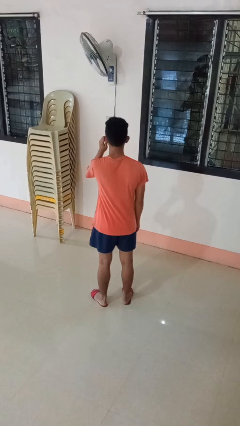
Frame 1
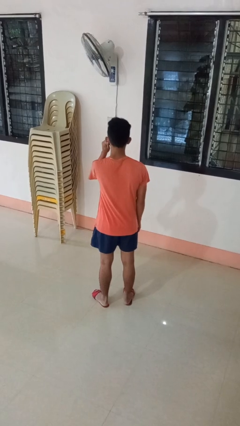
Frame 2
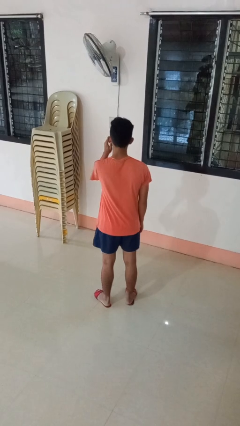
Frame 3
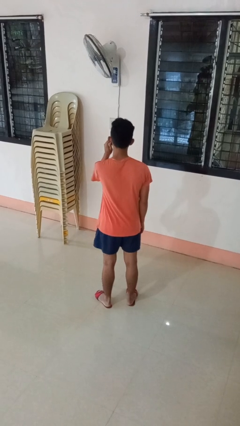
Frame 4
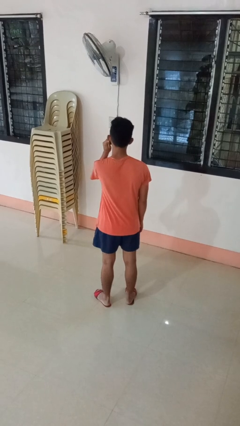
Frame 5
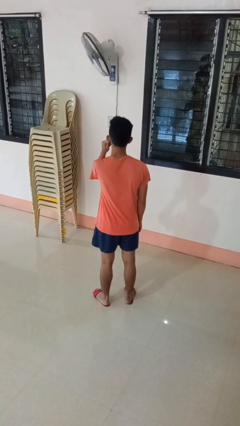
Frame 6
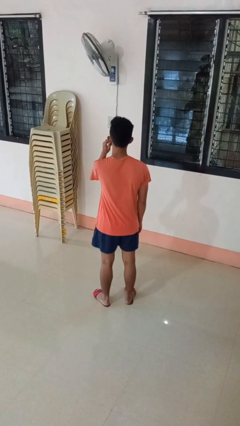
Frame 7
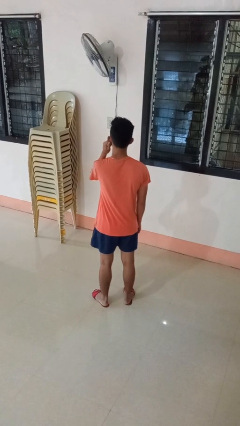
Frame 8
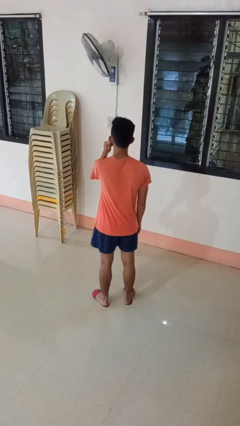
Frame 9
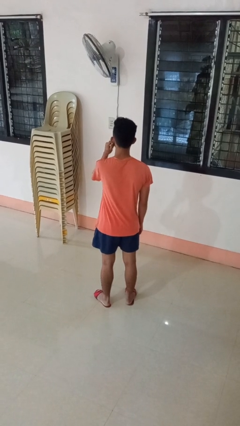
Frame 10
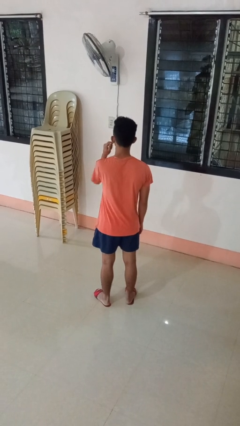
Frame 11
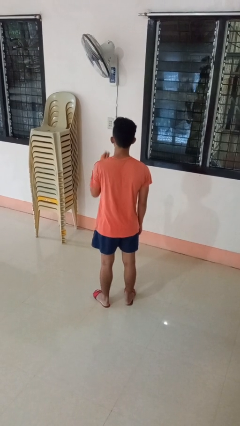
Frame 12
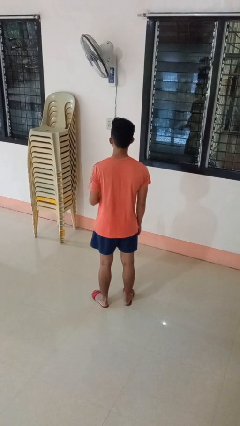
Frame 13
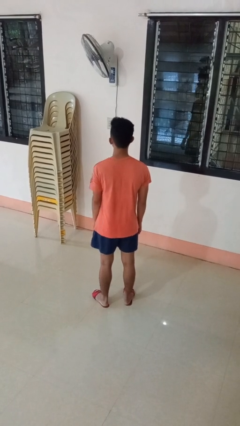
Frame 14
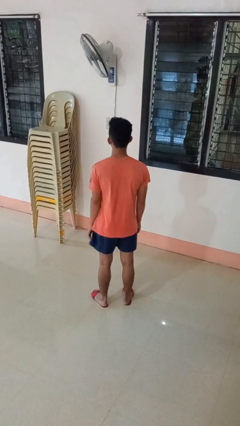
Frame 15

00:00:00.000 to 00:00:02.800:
person touches earlobe

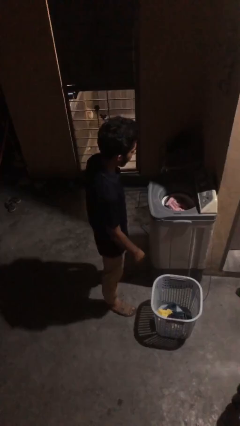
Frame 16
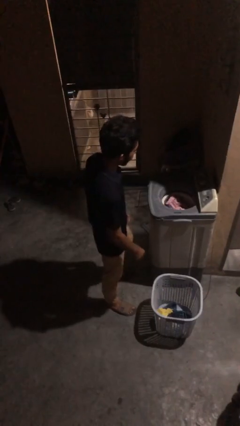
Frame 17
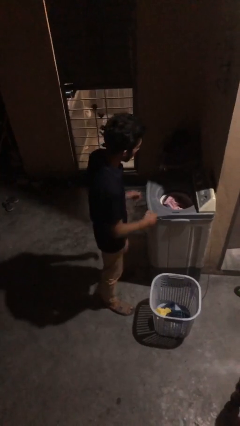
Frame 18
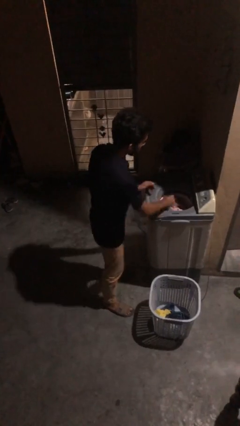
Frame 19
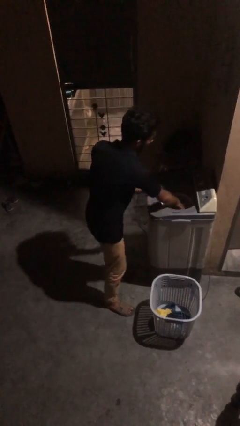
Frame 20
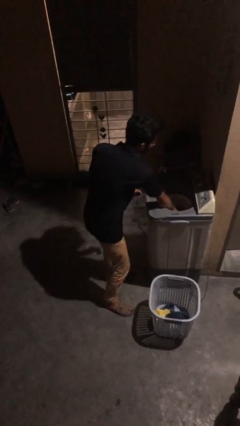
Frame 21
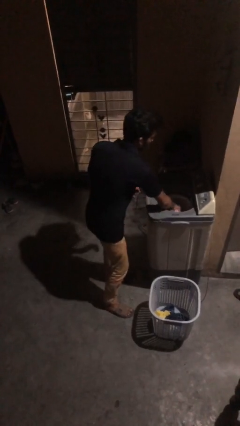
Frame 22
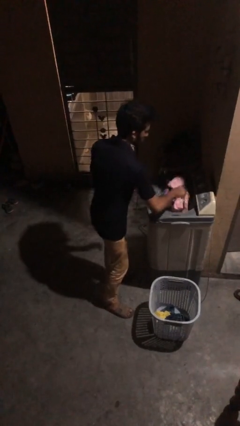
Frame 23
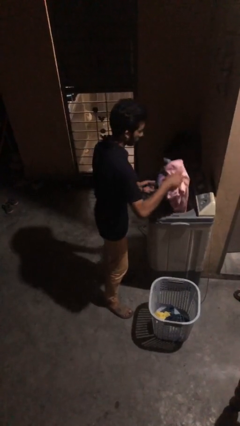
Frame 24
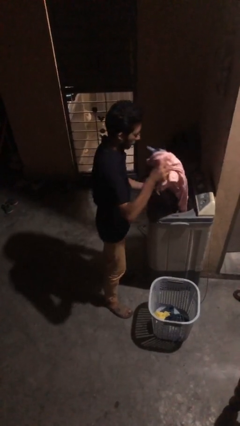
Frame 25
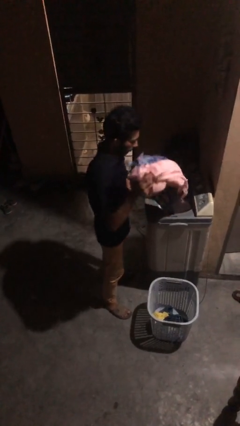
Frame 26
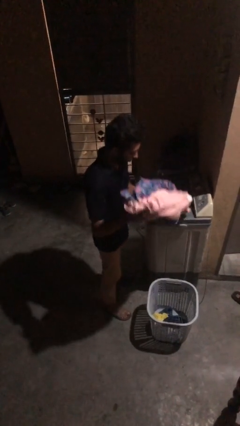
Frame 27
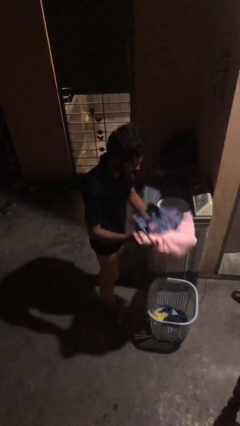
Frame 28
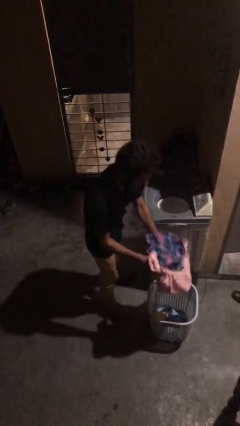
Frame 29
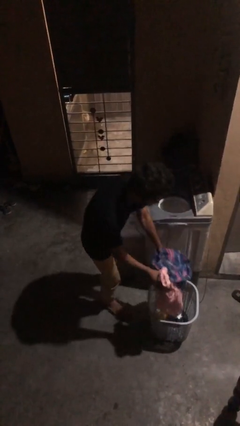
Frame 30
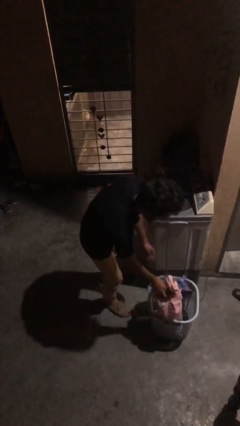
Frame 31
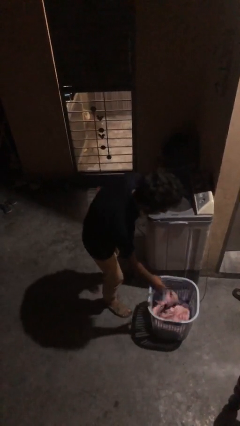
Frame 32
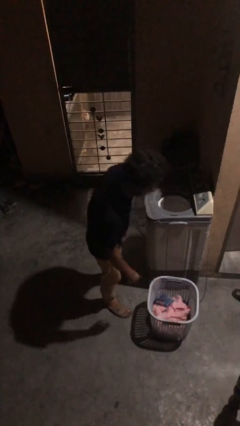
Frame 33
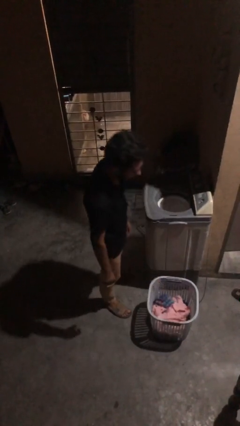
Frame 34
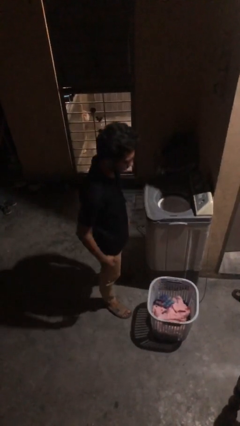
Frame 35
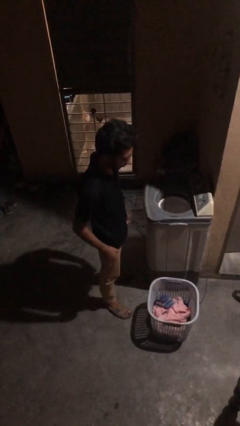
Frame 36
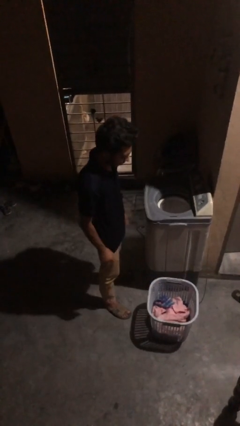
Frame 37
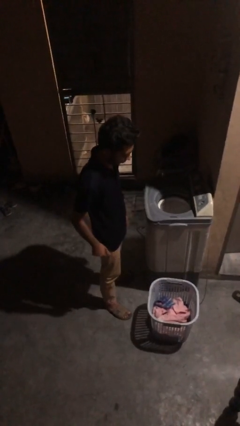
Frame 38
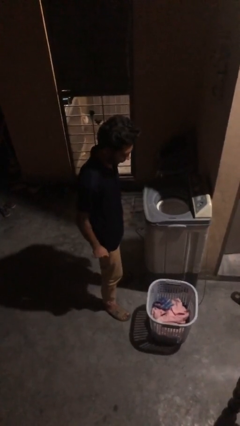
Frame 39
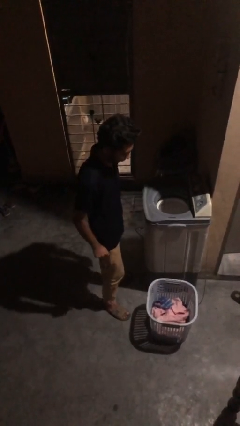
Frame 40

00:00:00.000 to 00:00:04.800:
person unloads dryer

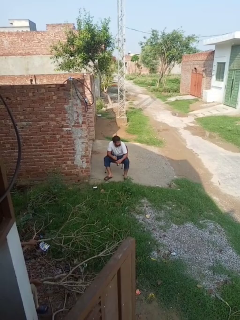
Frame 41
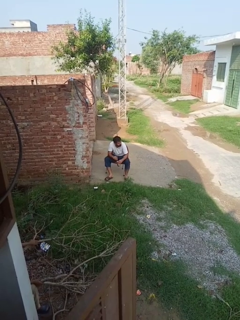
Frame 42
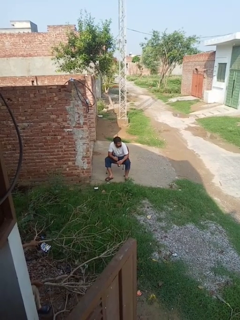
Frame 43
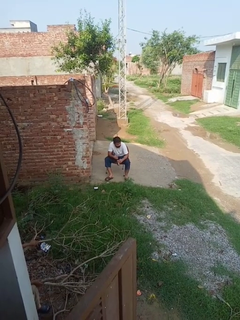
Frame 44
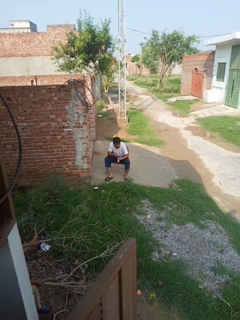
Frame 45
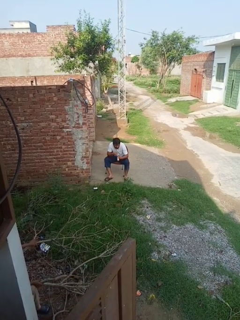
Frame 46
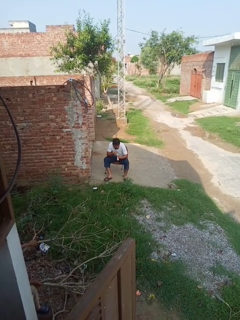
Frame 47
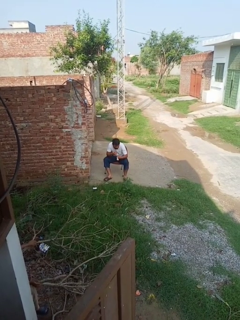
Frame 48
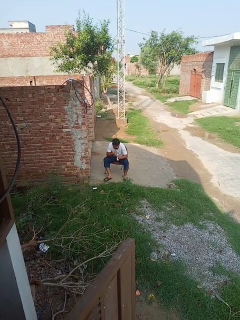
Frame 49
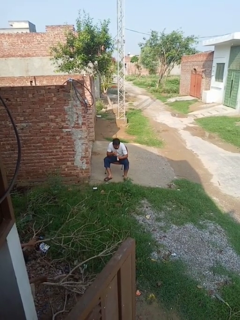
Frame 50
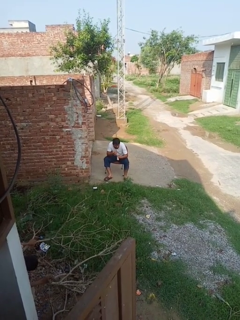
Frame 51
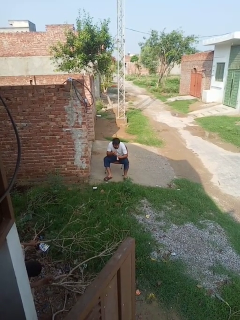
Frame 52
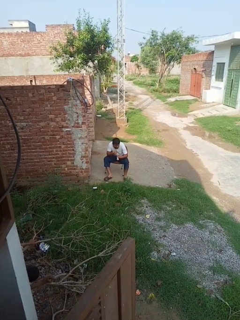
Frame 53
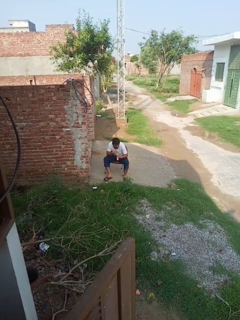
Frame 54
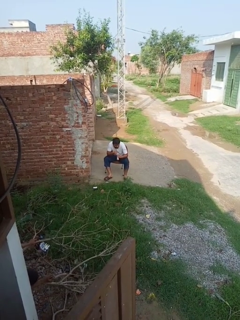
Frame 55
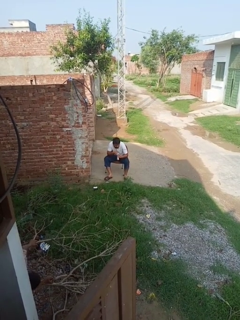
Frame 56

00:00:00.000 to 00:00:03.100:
person drinks from straw

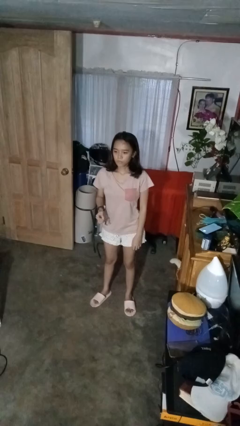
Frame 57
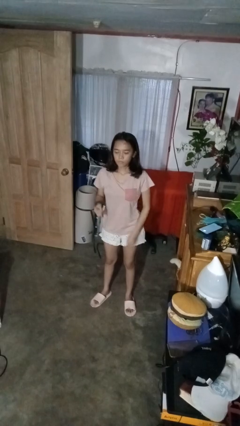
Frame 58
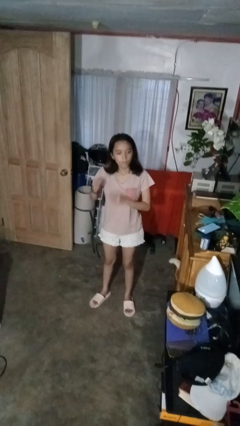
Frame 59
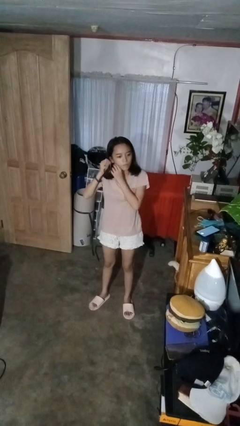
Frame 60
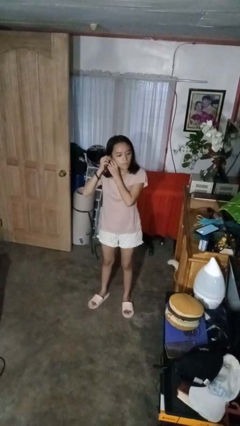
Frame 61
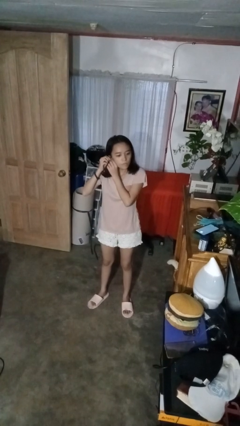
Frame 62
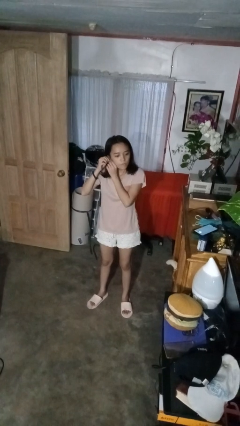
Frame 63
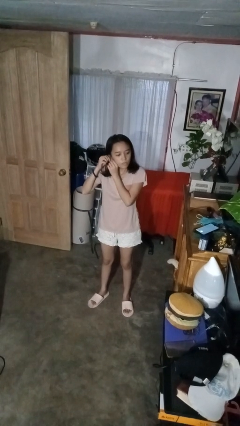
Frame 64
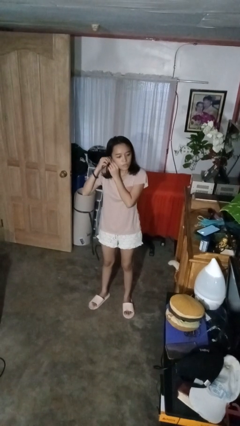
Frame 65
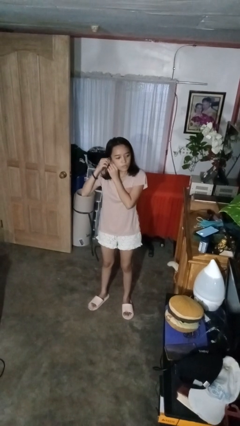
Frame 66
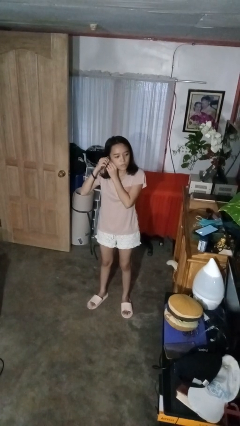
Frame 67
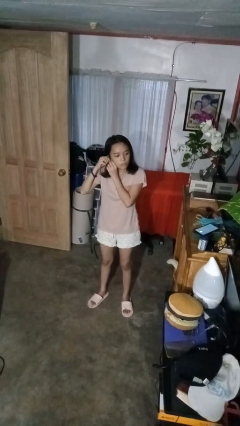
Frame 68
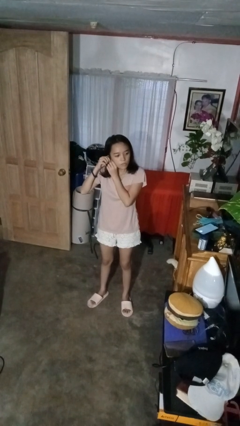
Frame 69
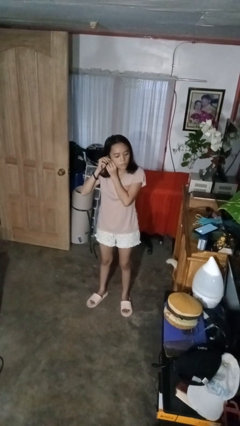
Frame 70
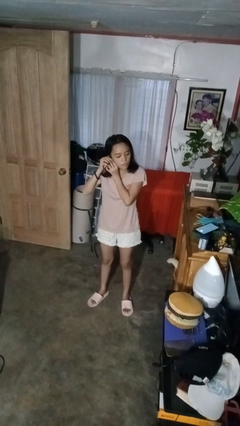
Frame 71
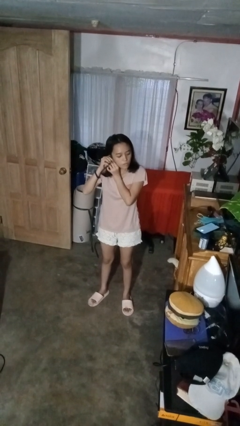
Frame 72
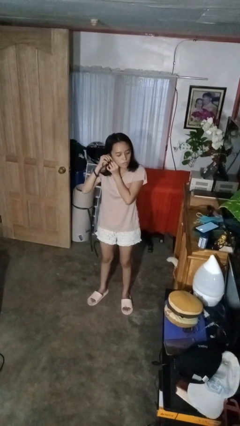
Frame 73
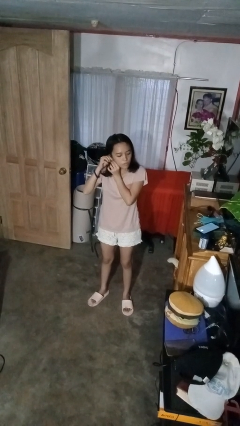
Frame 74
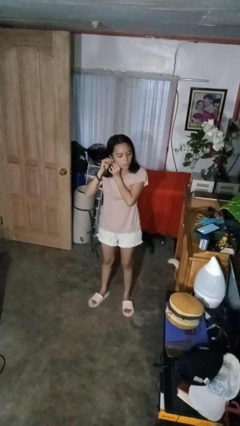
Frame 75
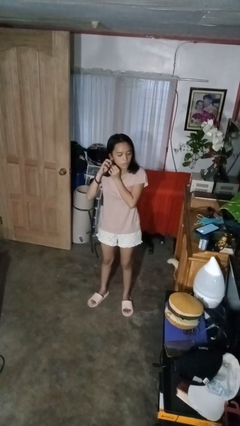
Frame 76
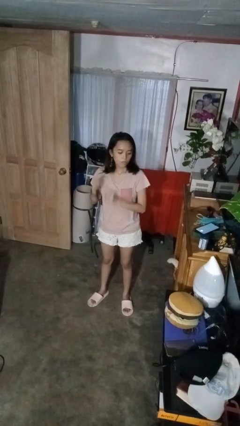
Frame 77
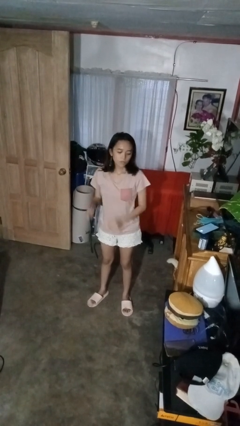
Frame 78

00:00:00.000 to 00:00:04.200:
person puts on earrings

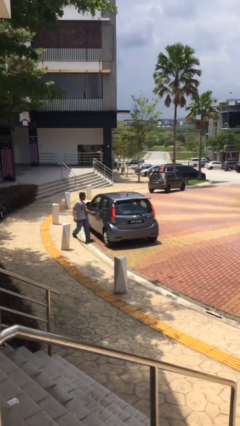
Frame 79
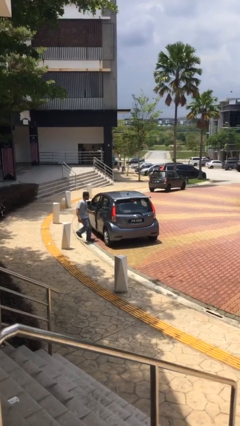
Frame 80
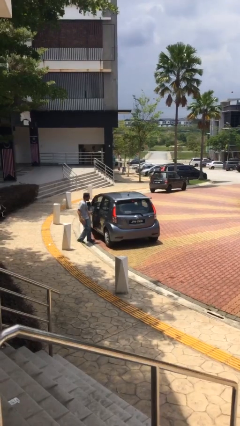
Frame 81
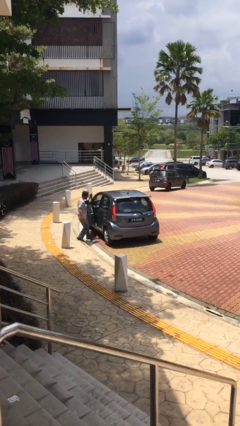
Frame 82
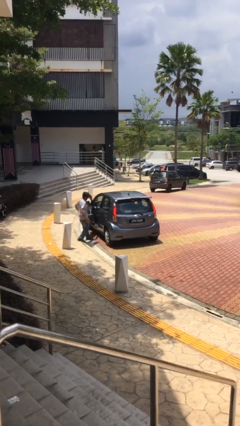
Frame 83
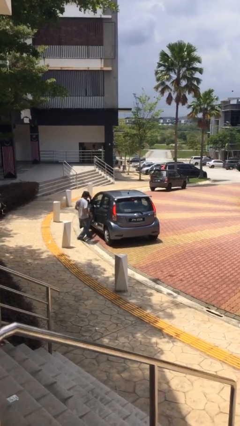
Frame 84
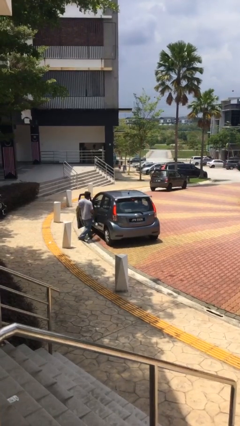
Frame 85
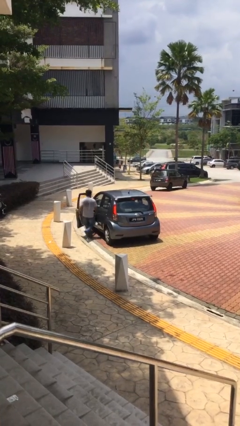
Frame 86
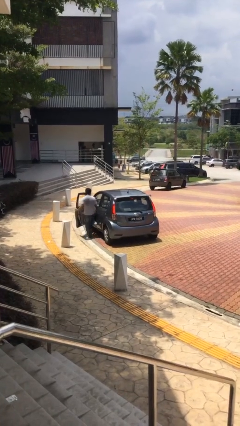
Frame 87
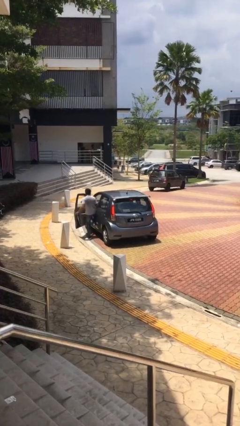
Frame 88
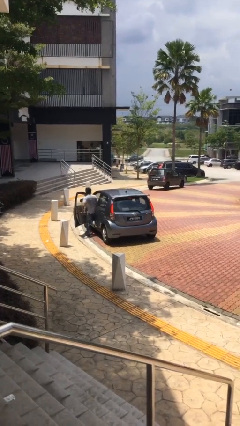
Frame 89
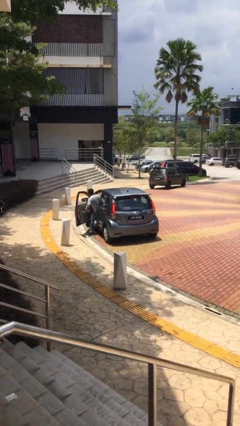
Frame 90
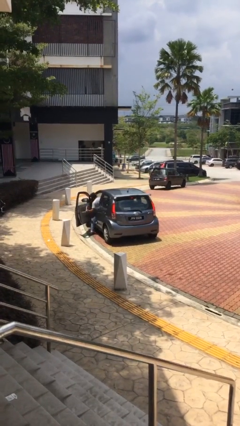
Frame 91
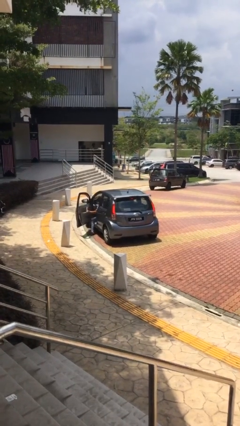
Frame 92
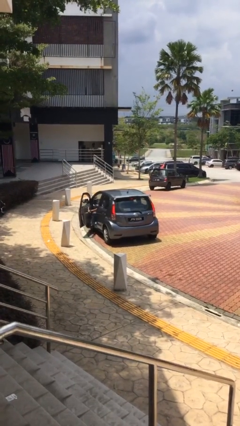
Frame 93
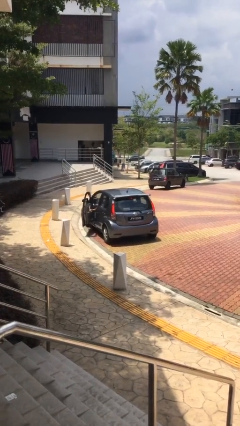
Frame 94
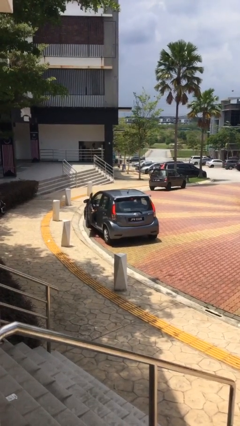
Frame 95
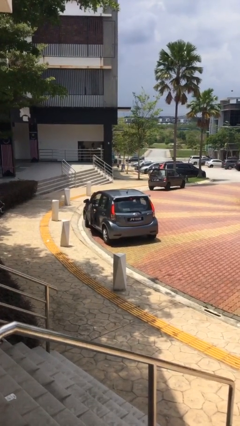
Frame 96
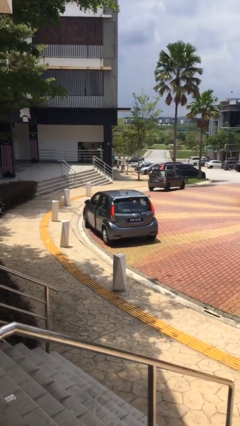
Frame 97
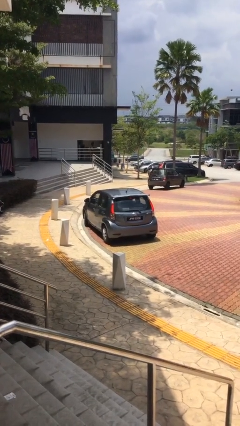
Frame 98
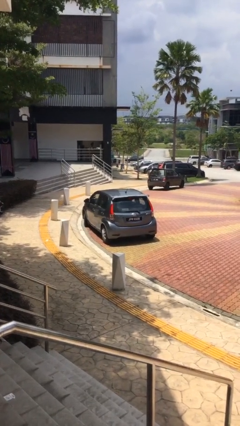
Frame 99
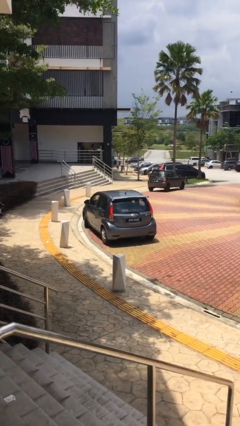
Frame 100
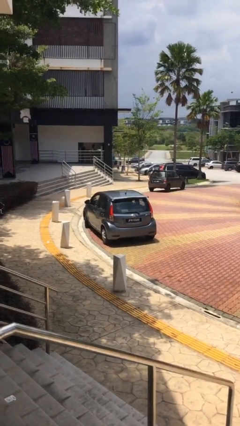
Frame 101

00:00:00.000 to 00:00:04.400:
car picks up person
